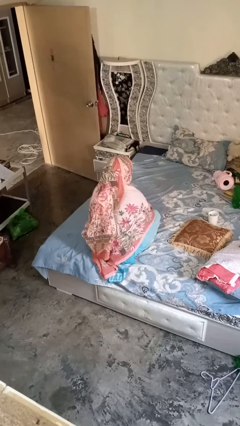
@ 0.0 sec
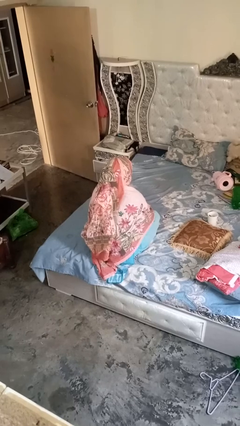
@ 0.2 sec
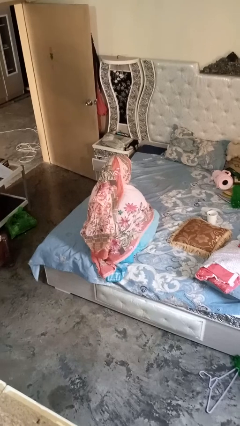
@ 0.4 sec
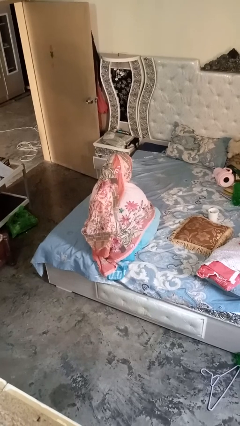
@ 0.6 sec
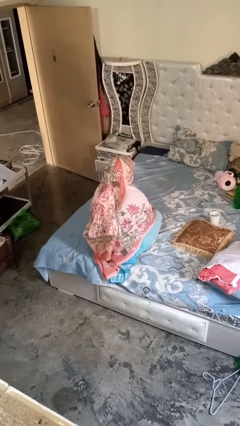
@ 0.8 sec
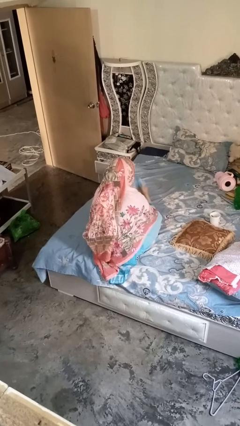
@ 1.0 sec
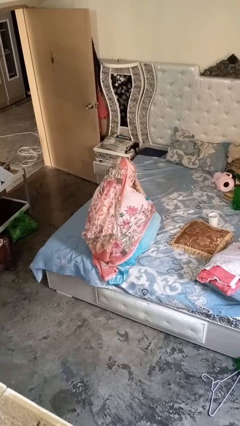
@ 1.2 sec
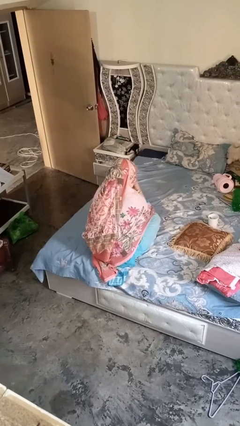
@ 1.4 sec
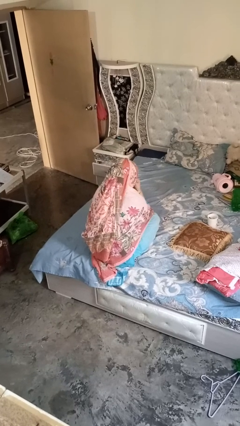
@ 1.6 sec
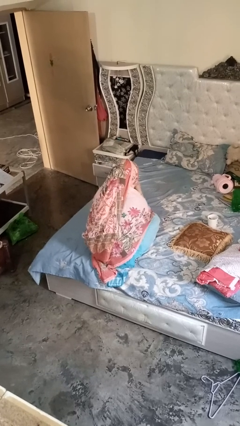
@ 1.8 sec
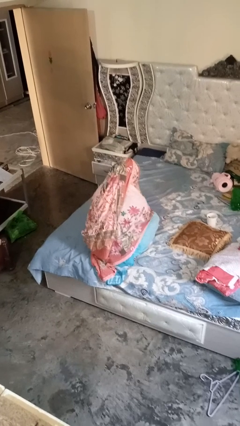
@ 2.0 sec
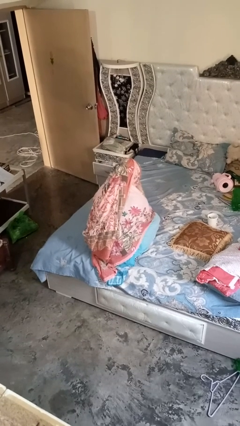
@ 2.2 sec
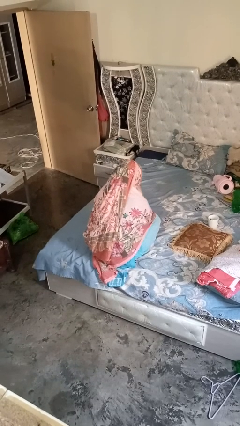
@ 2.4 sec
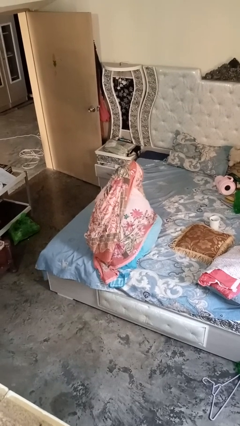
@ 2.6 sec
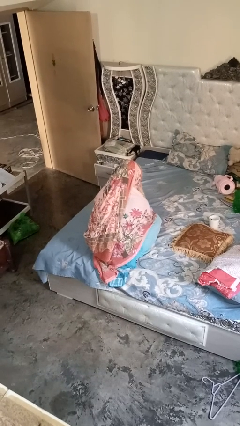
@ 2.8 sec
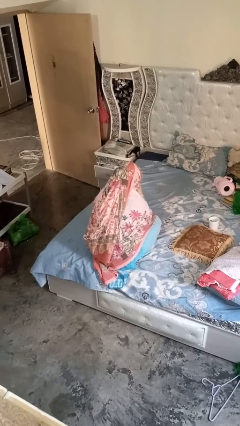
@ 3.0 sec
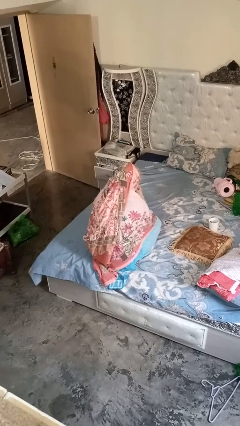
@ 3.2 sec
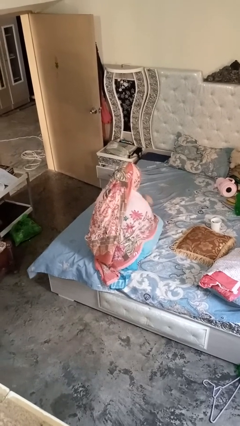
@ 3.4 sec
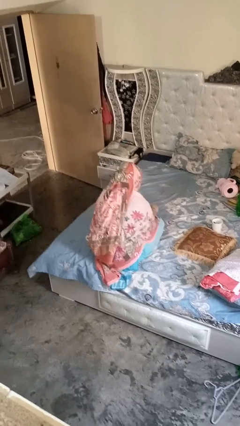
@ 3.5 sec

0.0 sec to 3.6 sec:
person blows nose

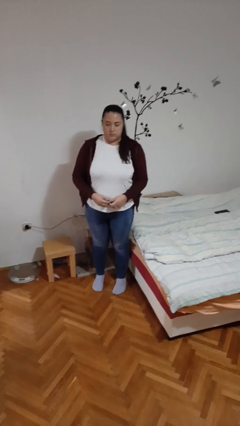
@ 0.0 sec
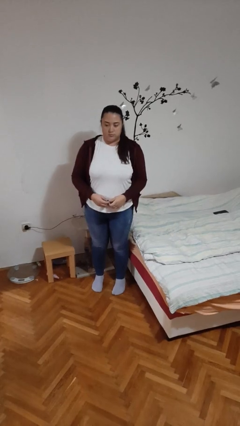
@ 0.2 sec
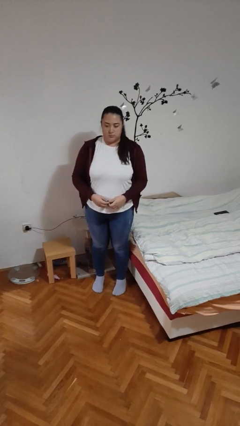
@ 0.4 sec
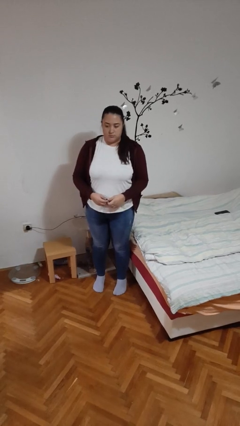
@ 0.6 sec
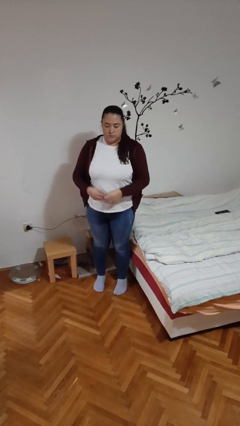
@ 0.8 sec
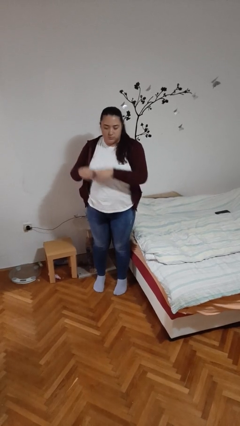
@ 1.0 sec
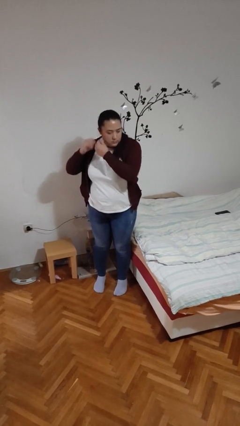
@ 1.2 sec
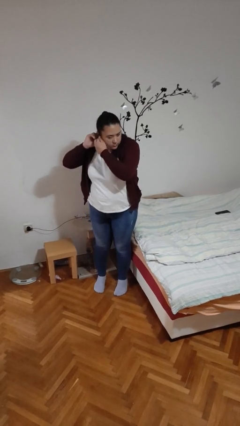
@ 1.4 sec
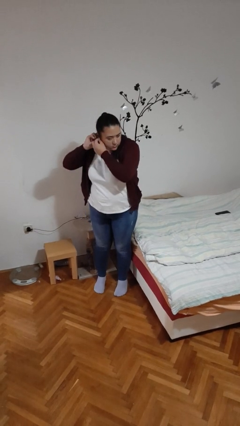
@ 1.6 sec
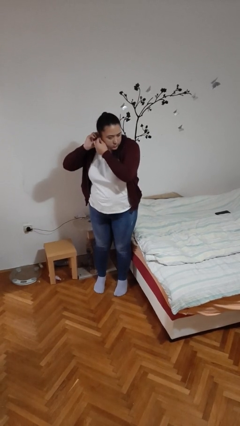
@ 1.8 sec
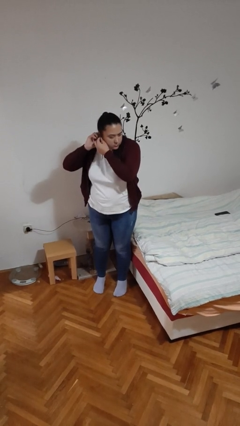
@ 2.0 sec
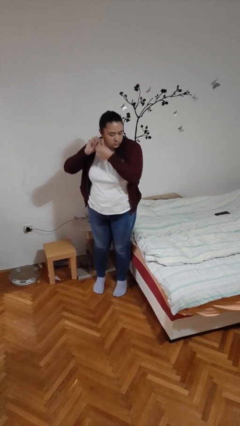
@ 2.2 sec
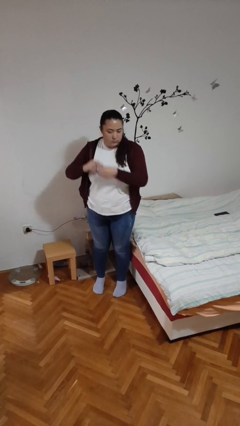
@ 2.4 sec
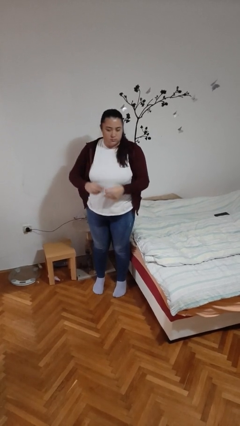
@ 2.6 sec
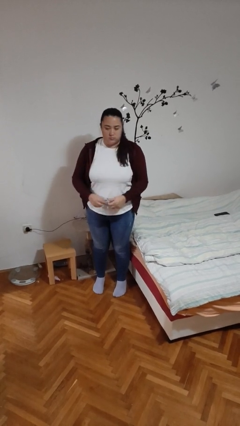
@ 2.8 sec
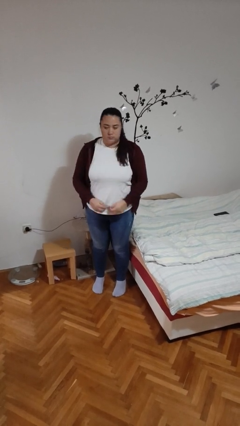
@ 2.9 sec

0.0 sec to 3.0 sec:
person takes off earrings

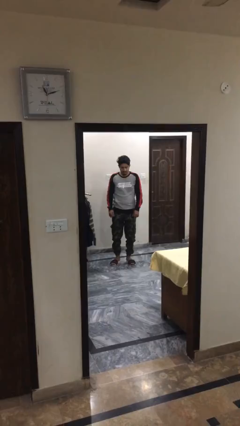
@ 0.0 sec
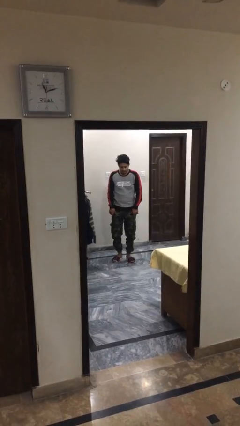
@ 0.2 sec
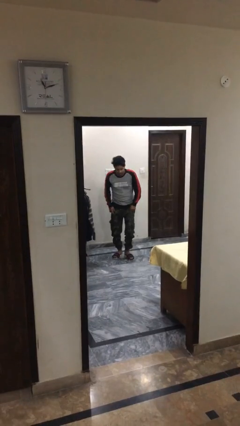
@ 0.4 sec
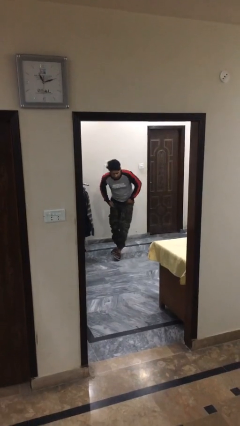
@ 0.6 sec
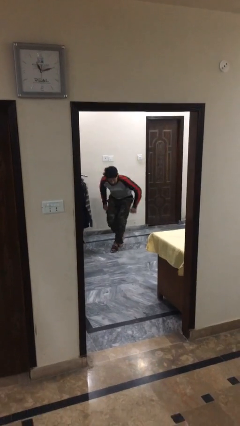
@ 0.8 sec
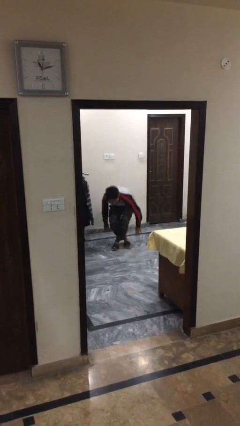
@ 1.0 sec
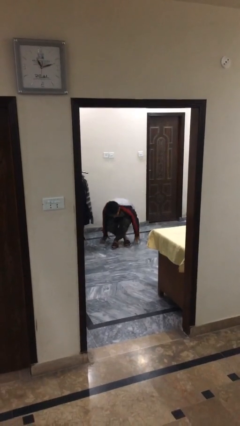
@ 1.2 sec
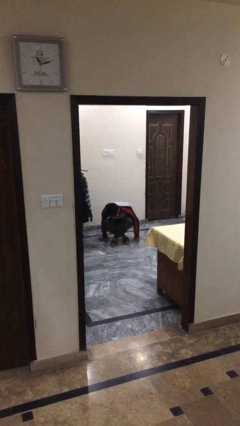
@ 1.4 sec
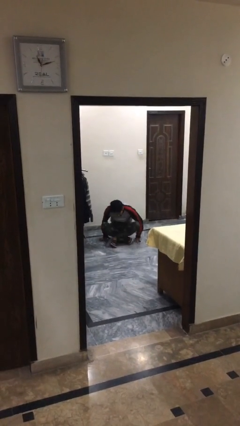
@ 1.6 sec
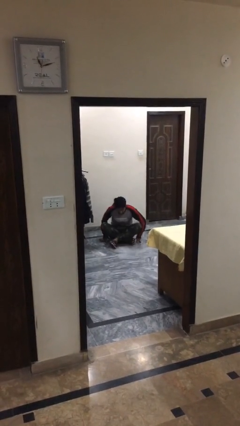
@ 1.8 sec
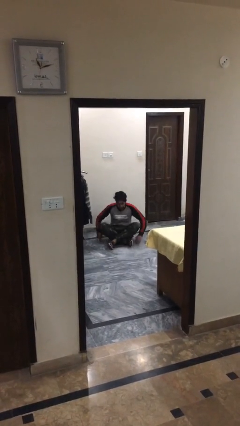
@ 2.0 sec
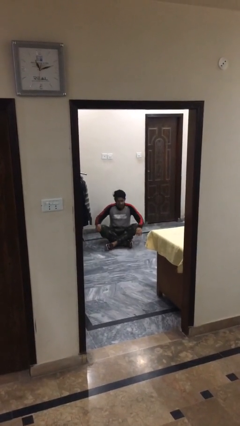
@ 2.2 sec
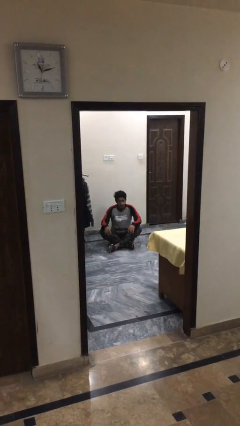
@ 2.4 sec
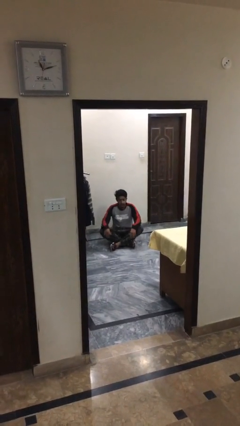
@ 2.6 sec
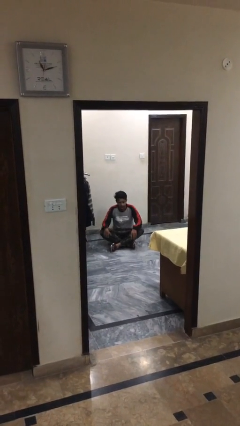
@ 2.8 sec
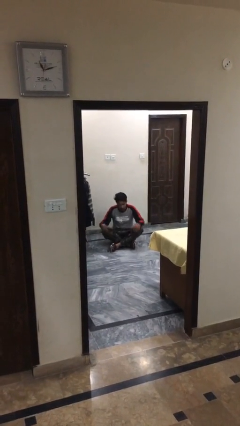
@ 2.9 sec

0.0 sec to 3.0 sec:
person sits down

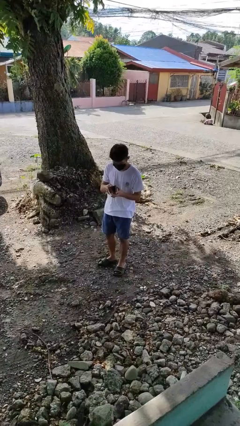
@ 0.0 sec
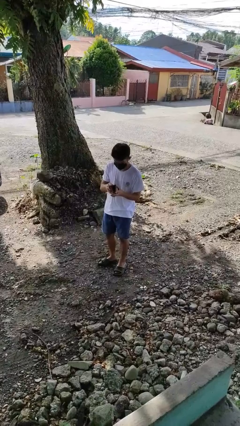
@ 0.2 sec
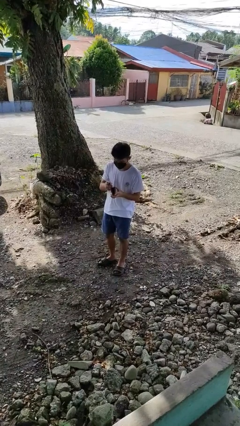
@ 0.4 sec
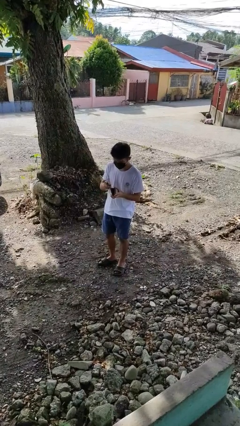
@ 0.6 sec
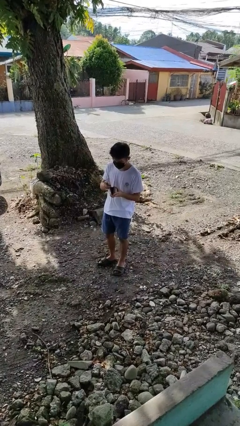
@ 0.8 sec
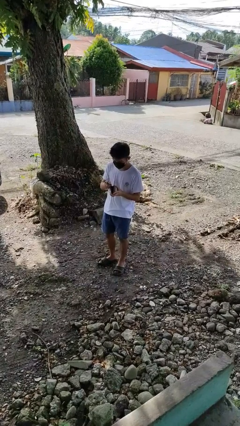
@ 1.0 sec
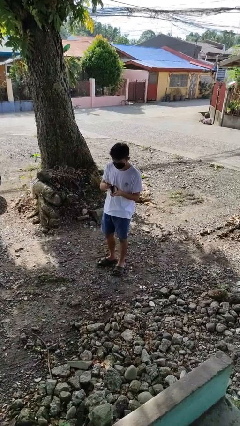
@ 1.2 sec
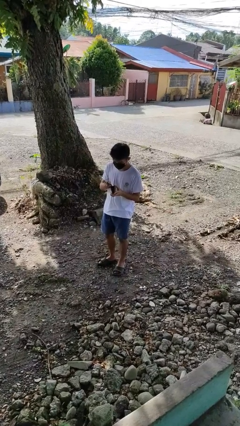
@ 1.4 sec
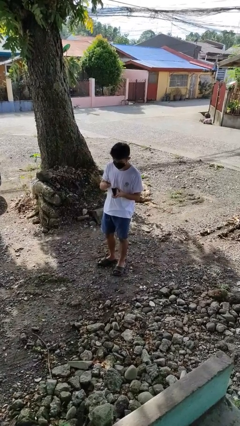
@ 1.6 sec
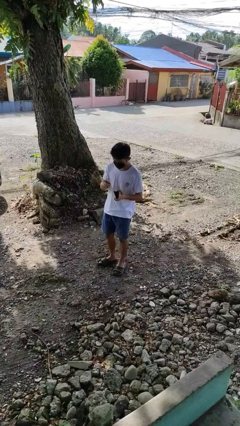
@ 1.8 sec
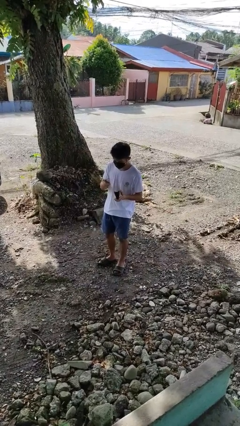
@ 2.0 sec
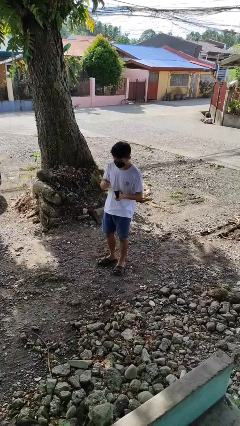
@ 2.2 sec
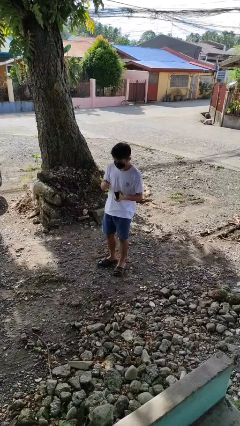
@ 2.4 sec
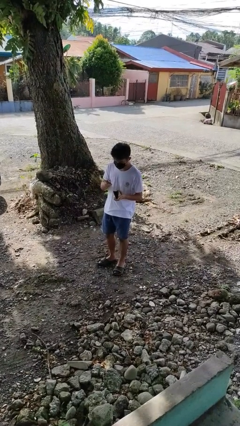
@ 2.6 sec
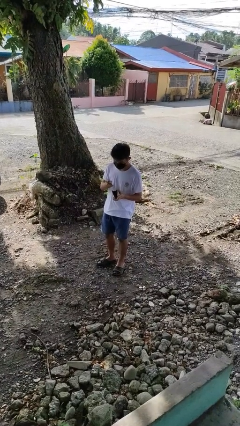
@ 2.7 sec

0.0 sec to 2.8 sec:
person takes object from purse

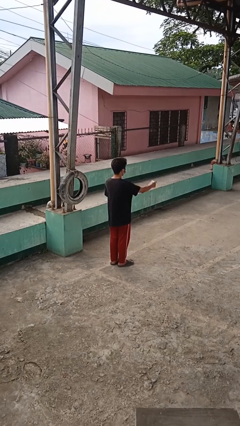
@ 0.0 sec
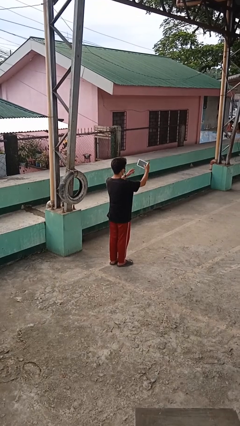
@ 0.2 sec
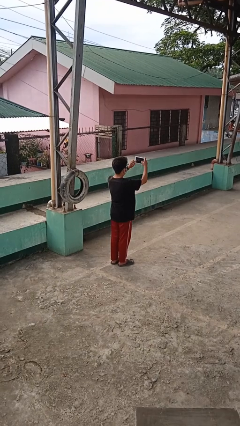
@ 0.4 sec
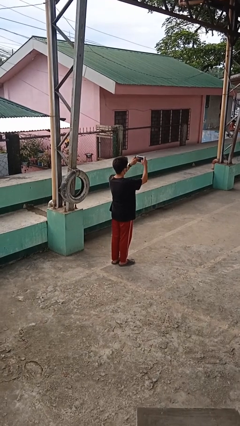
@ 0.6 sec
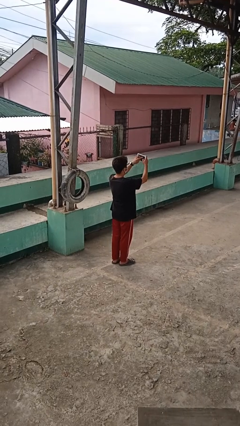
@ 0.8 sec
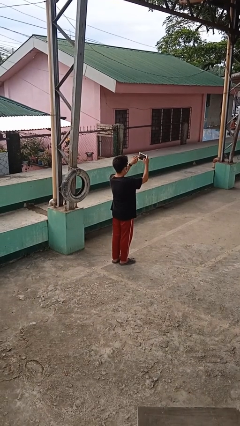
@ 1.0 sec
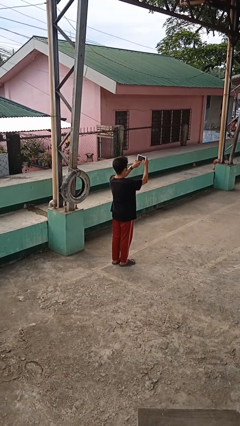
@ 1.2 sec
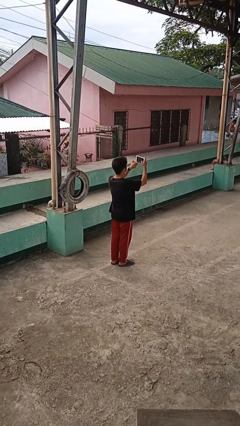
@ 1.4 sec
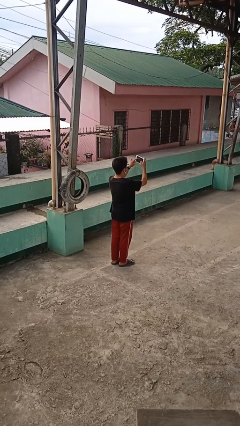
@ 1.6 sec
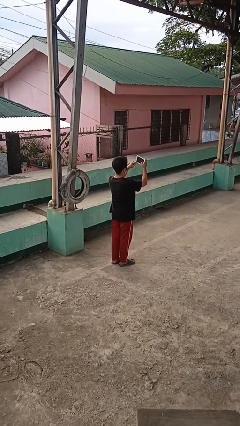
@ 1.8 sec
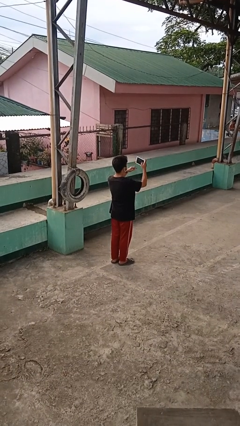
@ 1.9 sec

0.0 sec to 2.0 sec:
person interacts with tablet

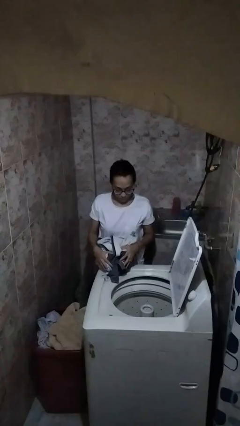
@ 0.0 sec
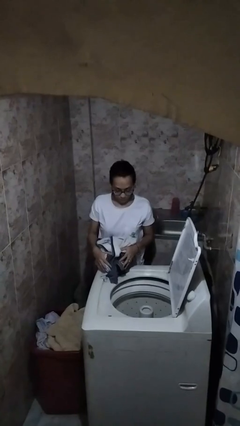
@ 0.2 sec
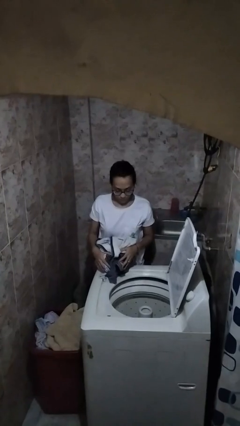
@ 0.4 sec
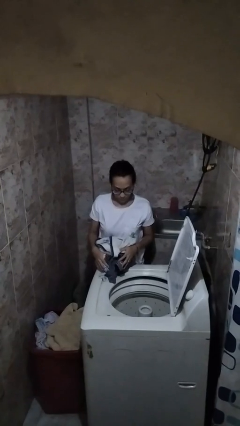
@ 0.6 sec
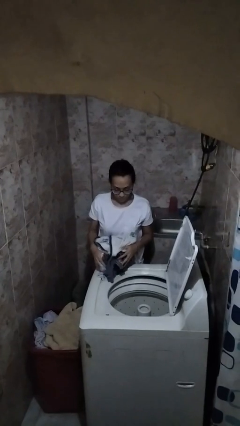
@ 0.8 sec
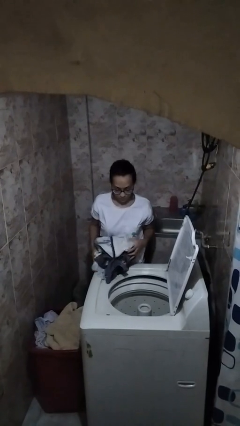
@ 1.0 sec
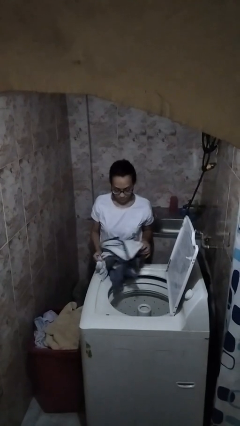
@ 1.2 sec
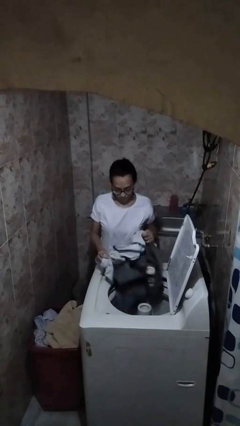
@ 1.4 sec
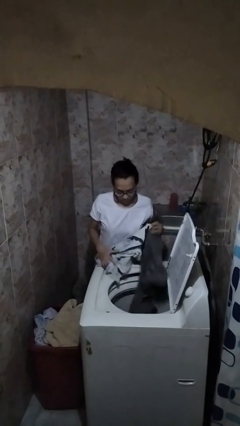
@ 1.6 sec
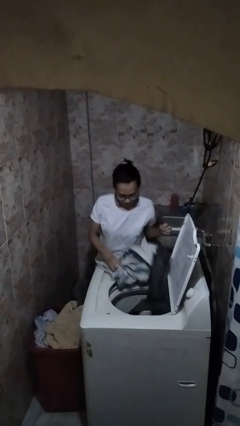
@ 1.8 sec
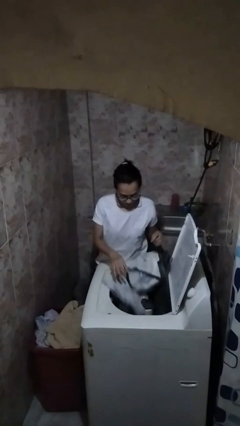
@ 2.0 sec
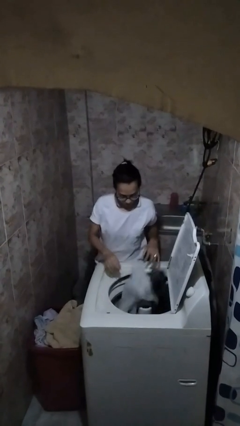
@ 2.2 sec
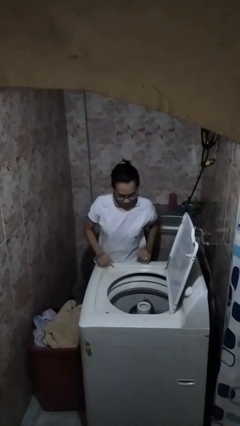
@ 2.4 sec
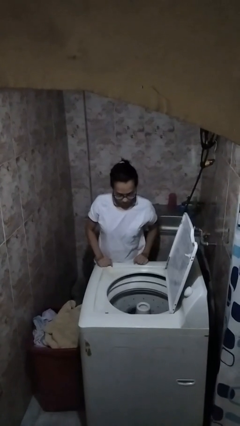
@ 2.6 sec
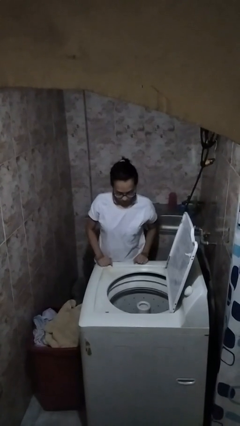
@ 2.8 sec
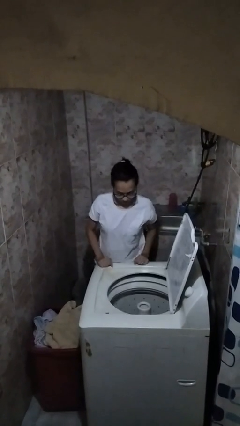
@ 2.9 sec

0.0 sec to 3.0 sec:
person unloads clotheswasher
